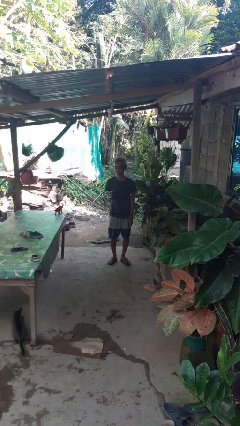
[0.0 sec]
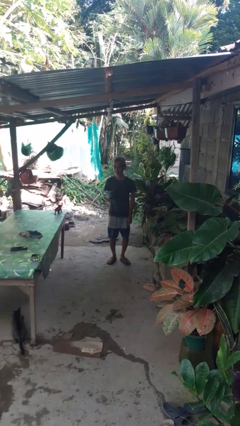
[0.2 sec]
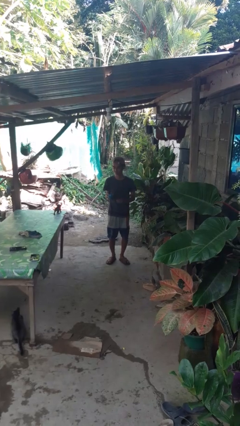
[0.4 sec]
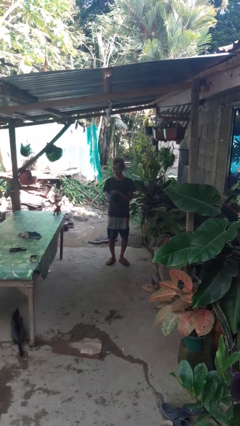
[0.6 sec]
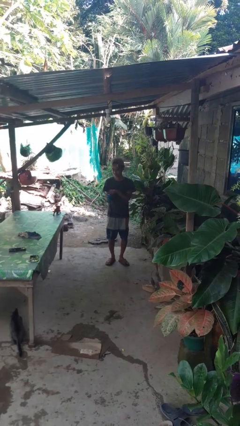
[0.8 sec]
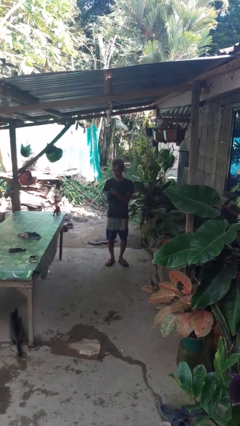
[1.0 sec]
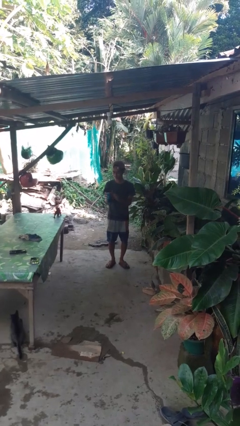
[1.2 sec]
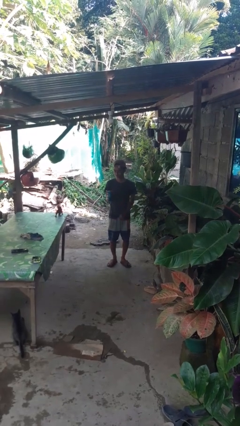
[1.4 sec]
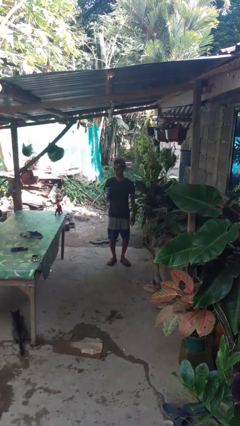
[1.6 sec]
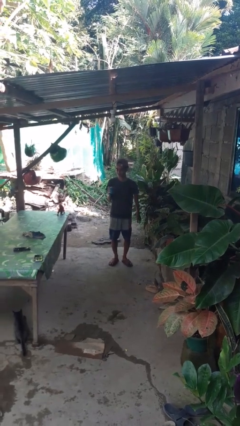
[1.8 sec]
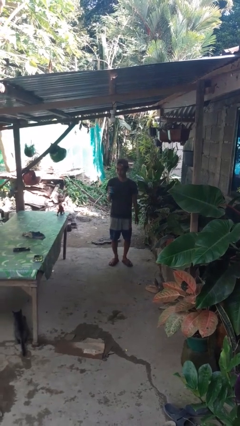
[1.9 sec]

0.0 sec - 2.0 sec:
person opens beverage can

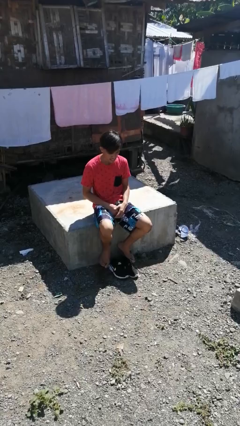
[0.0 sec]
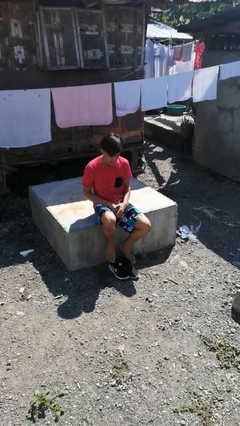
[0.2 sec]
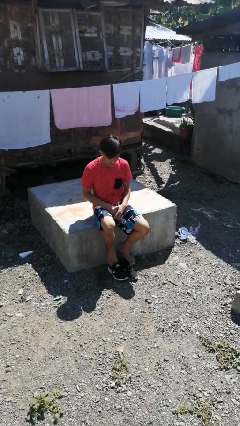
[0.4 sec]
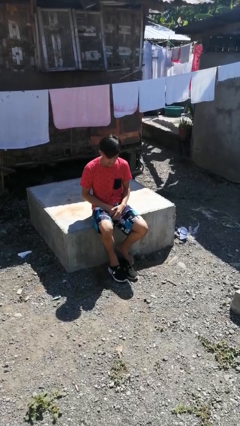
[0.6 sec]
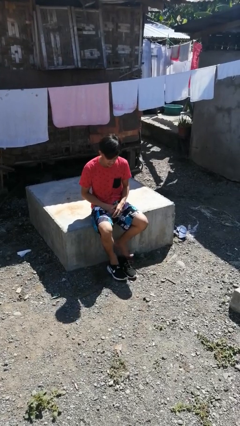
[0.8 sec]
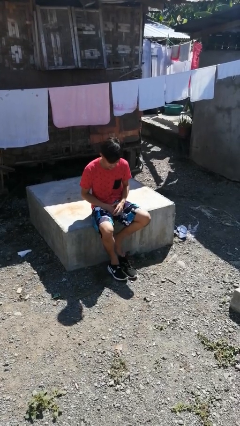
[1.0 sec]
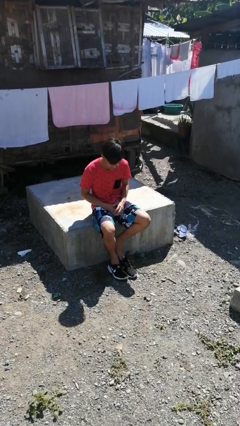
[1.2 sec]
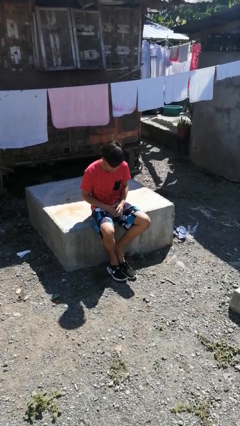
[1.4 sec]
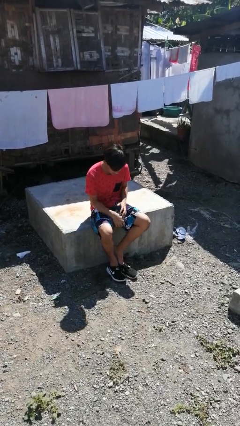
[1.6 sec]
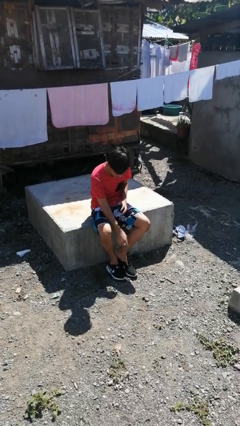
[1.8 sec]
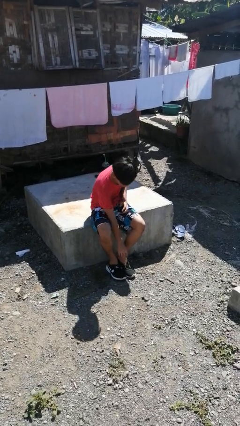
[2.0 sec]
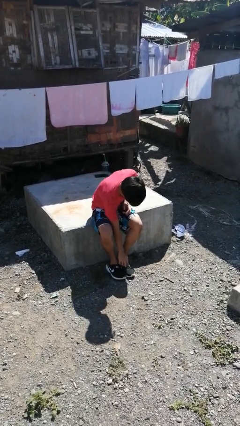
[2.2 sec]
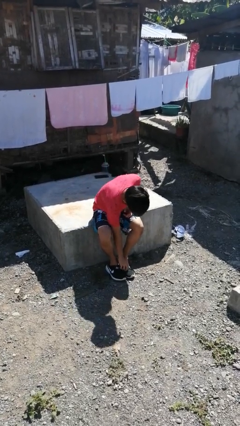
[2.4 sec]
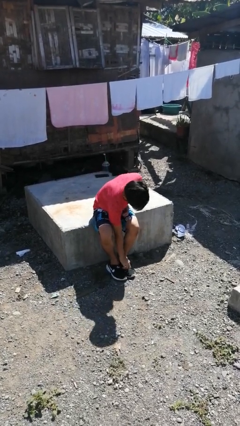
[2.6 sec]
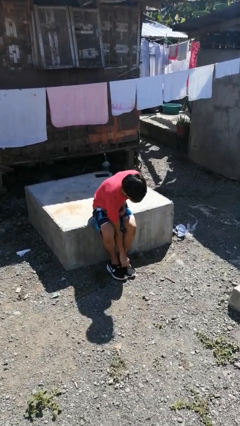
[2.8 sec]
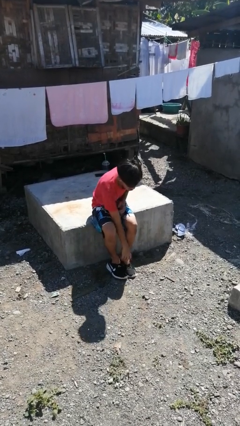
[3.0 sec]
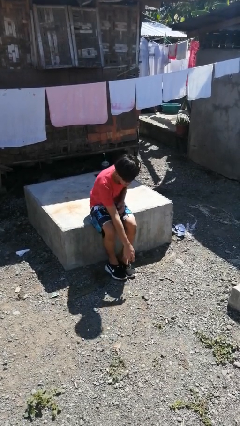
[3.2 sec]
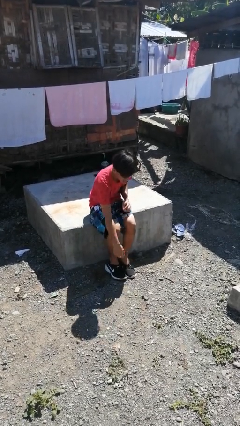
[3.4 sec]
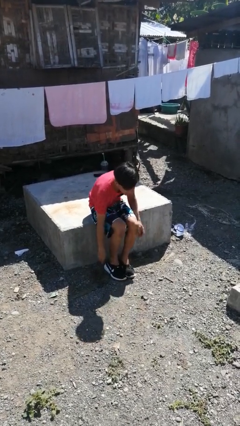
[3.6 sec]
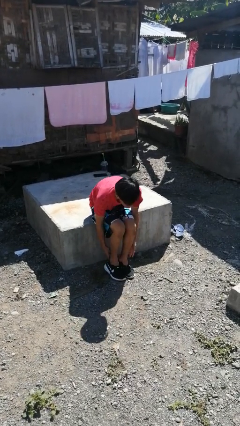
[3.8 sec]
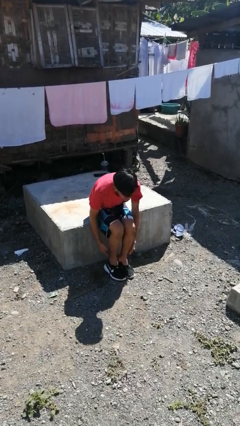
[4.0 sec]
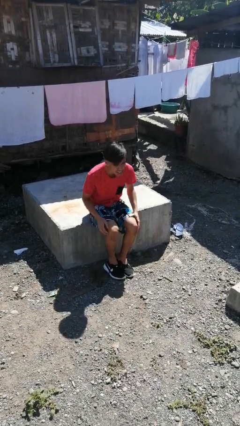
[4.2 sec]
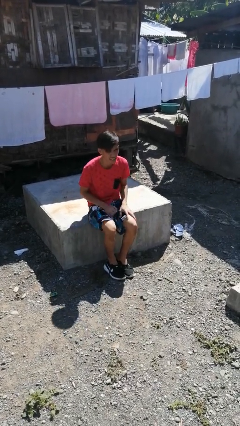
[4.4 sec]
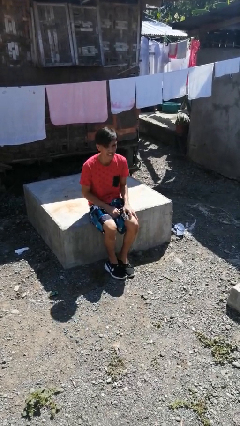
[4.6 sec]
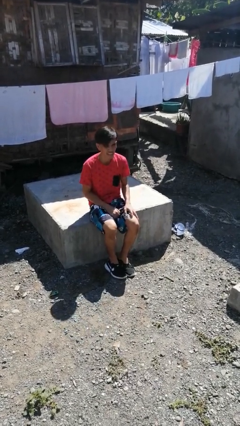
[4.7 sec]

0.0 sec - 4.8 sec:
person puts on shoes

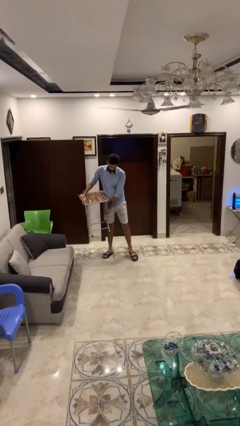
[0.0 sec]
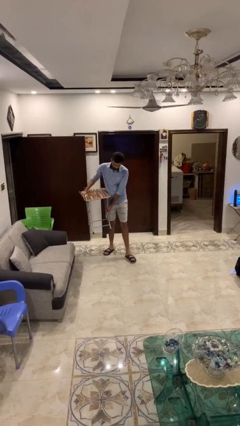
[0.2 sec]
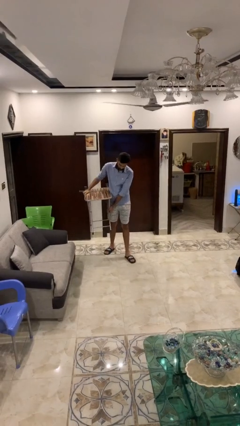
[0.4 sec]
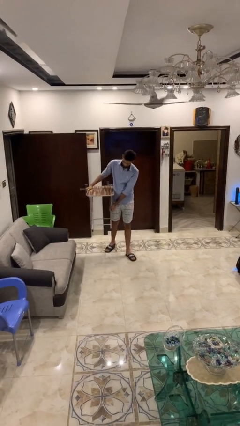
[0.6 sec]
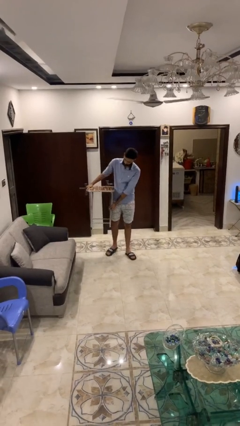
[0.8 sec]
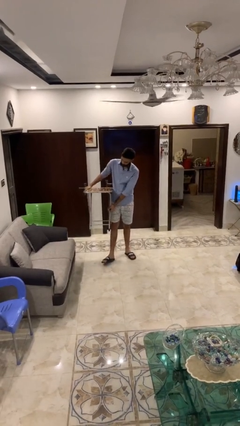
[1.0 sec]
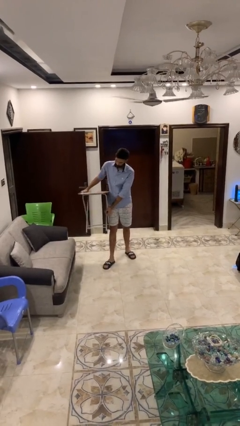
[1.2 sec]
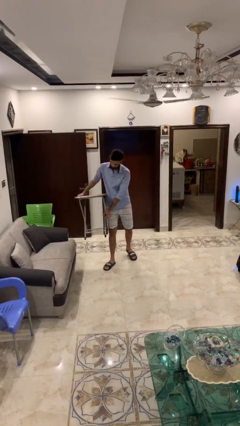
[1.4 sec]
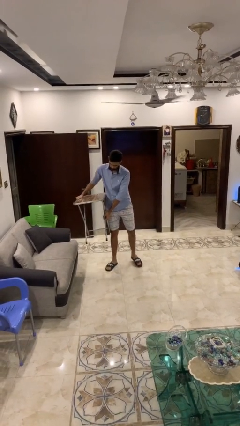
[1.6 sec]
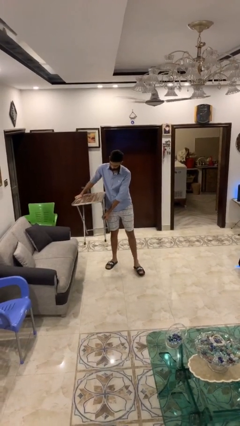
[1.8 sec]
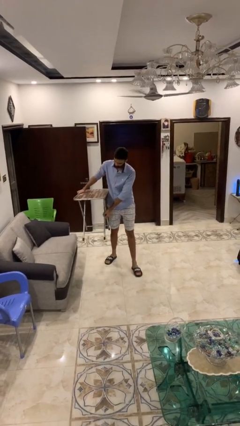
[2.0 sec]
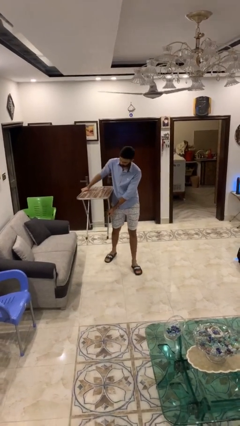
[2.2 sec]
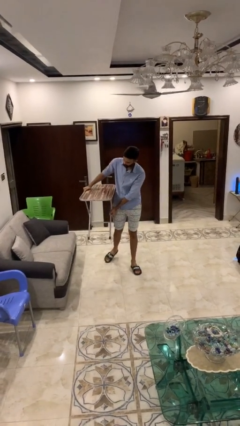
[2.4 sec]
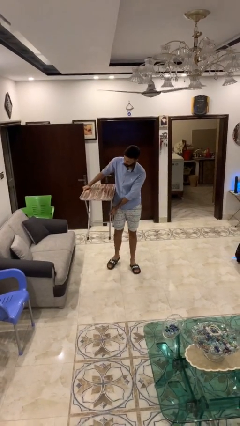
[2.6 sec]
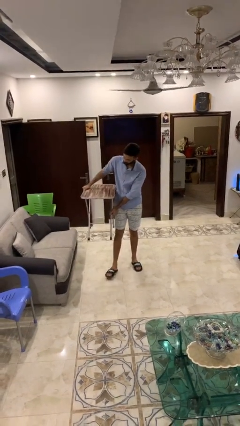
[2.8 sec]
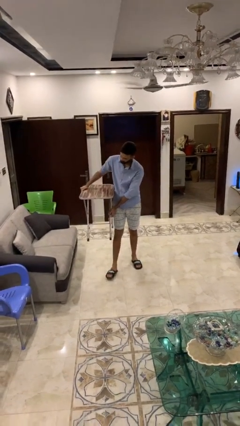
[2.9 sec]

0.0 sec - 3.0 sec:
person carries heavy object

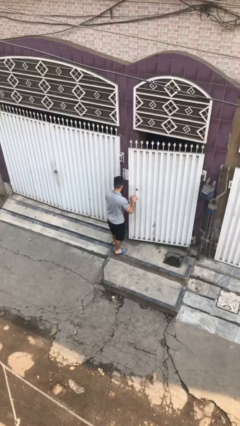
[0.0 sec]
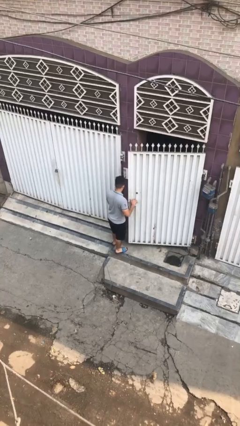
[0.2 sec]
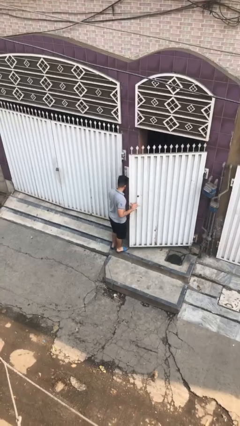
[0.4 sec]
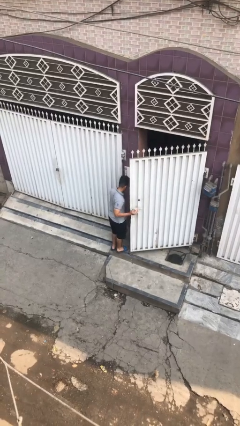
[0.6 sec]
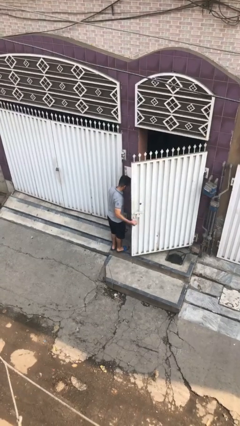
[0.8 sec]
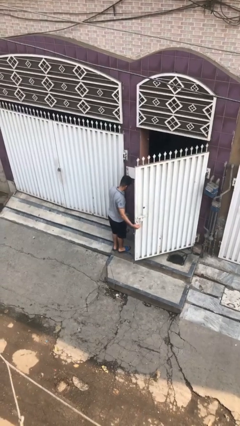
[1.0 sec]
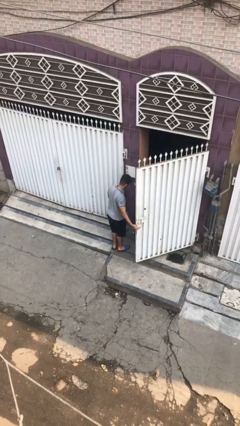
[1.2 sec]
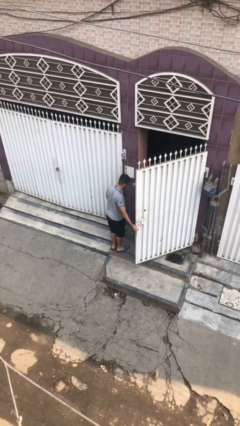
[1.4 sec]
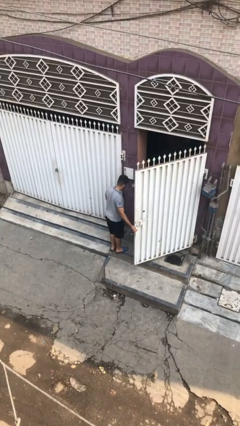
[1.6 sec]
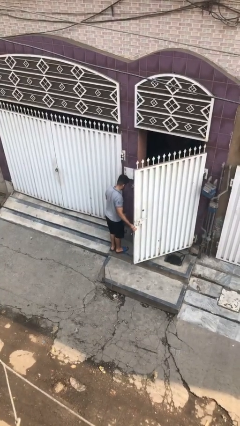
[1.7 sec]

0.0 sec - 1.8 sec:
person opens facility door

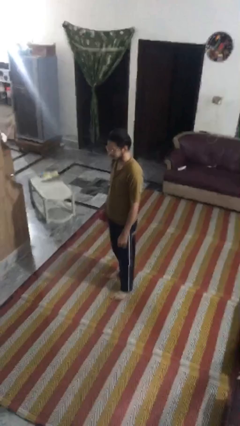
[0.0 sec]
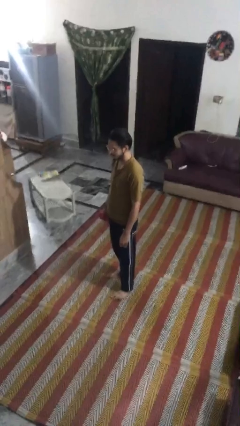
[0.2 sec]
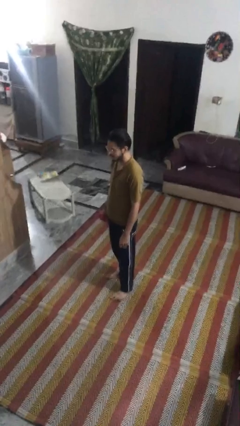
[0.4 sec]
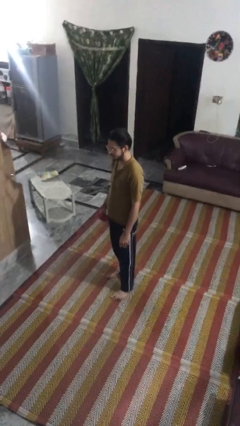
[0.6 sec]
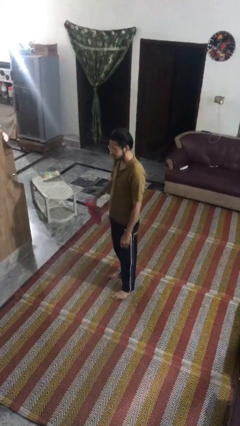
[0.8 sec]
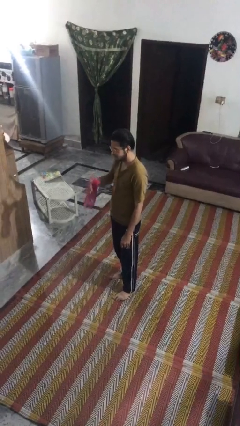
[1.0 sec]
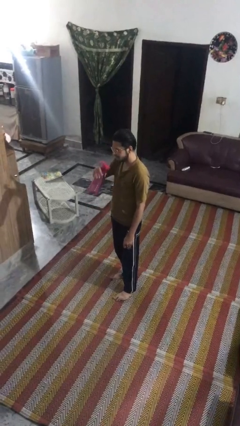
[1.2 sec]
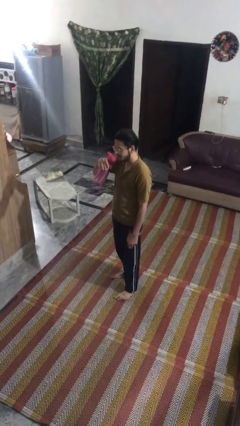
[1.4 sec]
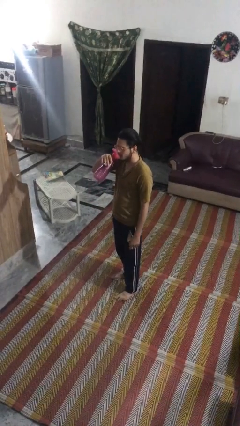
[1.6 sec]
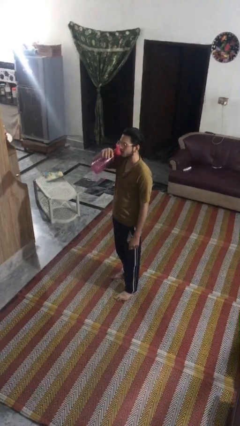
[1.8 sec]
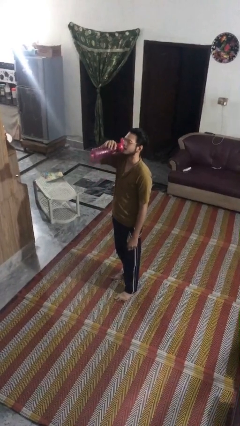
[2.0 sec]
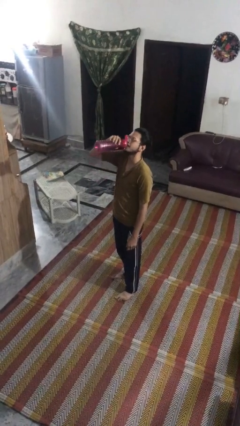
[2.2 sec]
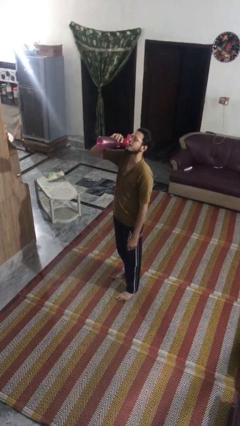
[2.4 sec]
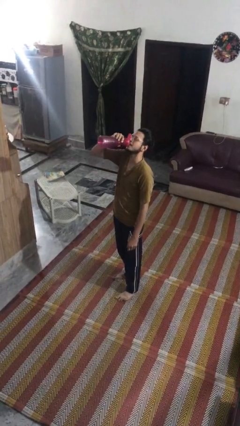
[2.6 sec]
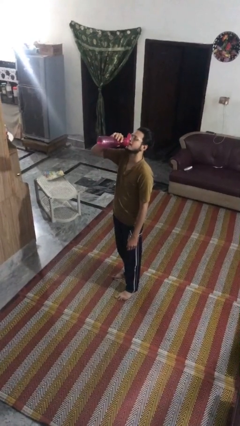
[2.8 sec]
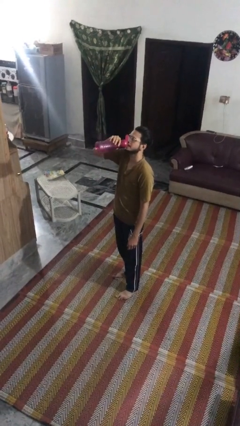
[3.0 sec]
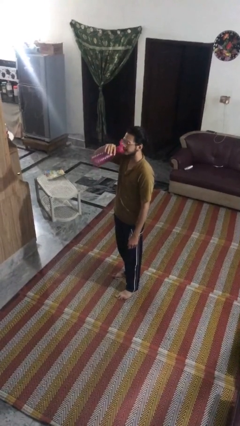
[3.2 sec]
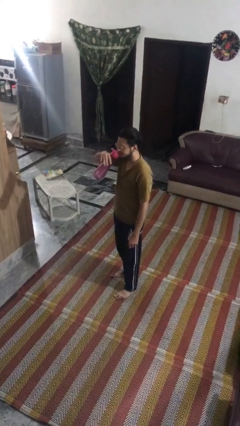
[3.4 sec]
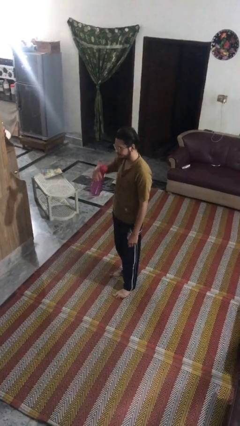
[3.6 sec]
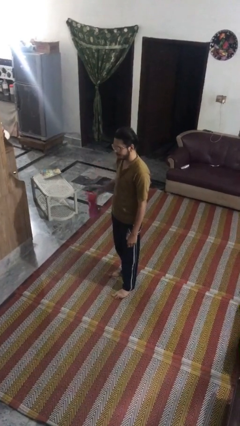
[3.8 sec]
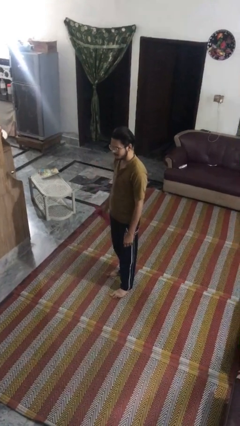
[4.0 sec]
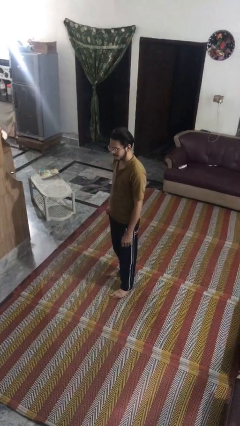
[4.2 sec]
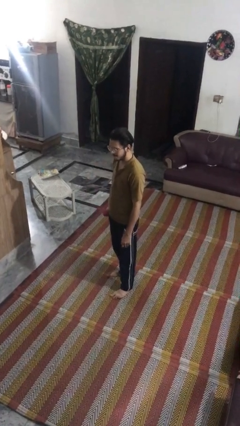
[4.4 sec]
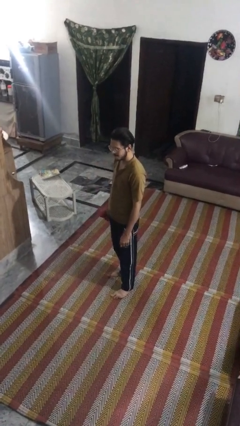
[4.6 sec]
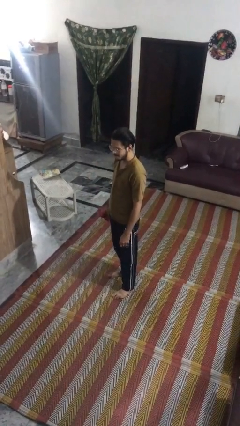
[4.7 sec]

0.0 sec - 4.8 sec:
person drinks from bottle

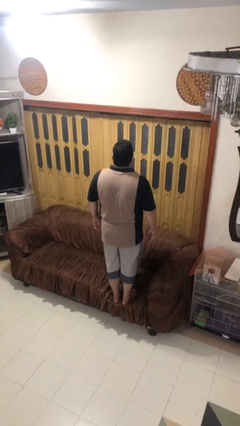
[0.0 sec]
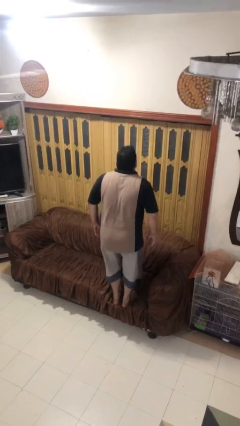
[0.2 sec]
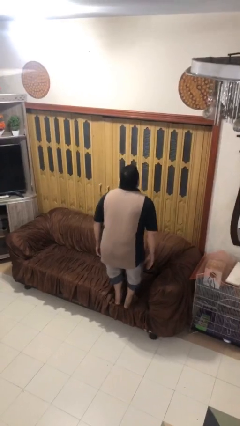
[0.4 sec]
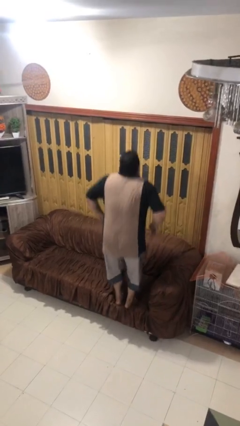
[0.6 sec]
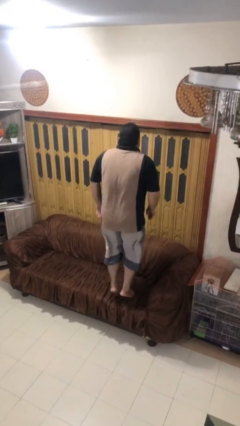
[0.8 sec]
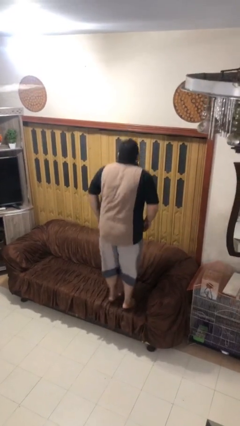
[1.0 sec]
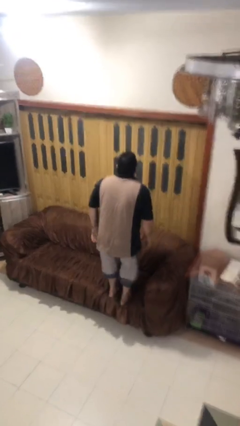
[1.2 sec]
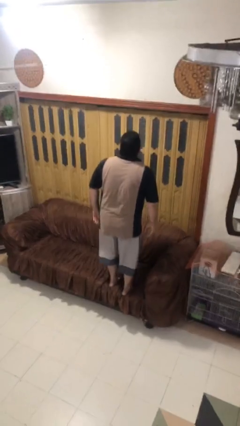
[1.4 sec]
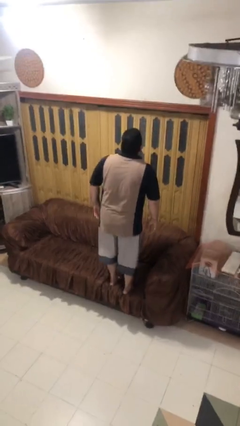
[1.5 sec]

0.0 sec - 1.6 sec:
person jumps on couch
